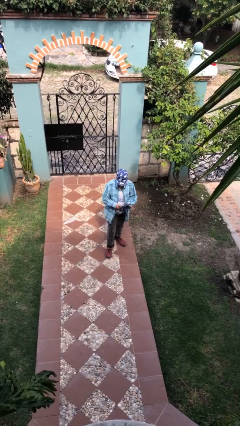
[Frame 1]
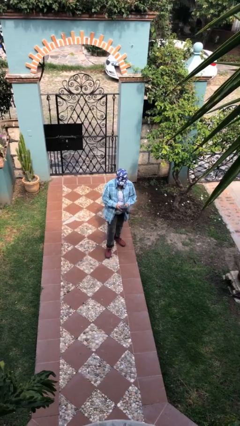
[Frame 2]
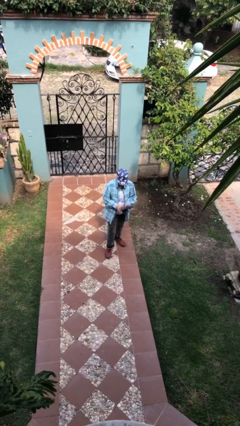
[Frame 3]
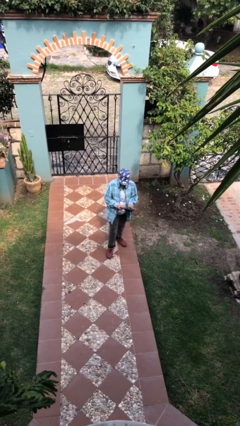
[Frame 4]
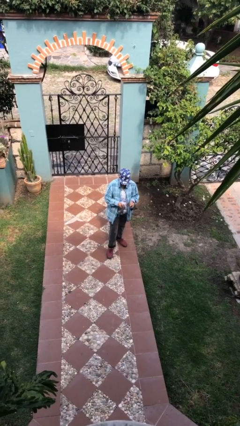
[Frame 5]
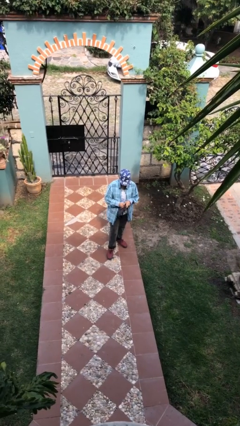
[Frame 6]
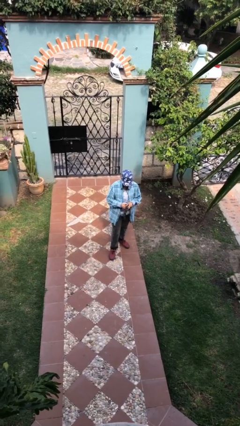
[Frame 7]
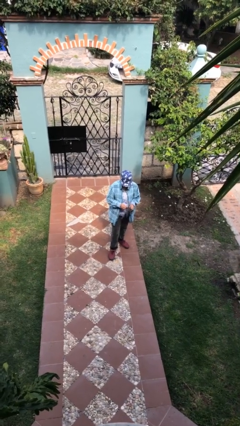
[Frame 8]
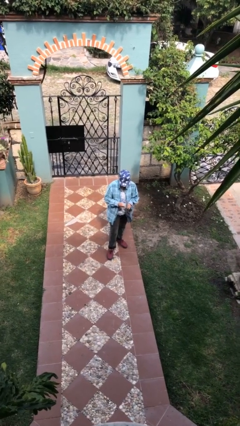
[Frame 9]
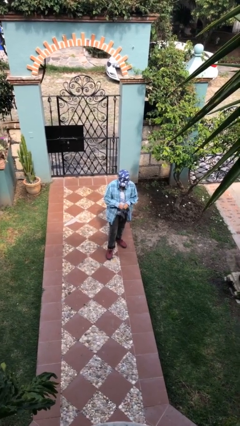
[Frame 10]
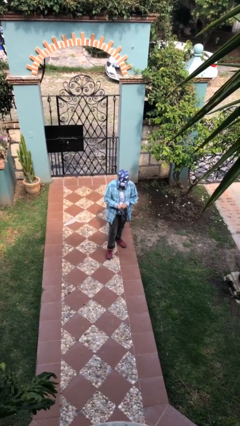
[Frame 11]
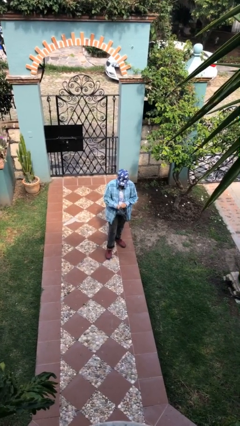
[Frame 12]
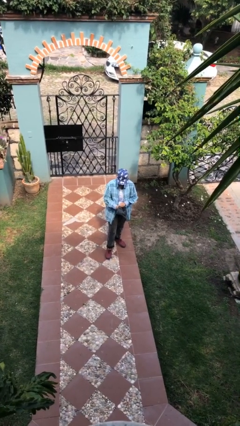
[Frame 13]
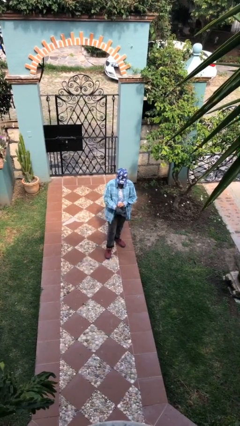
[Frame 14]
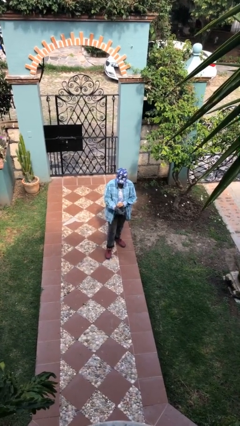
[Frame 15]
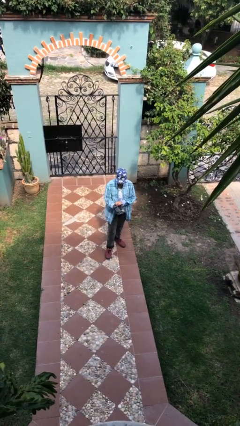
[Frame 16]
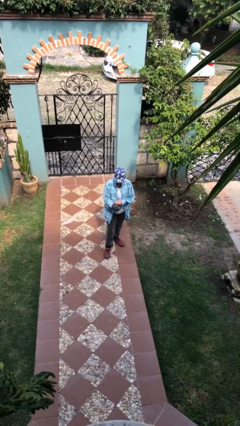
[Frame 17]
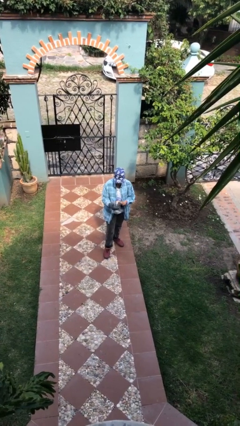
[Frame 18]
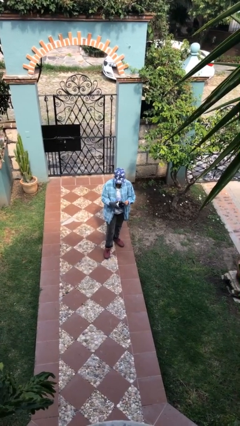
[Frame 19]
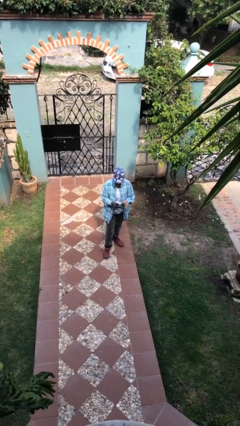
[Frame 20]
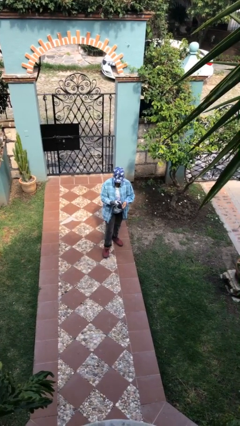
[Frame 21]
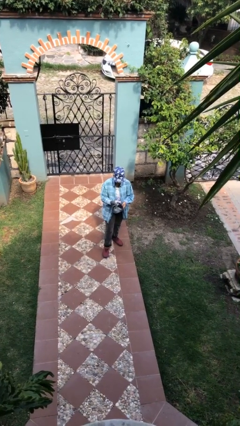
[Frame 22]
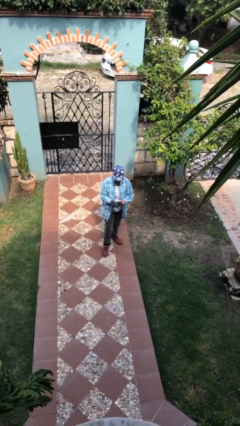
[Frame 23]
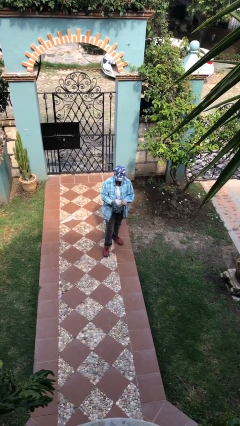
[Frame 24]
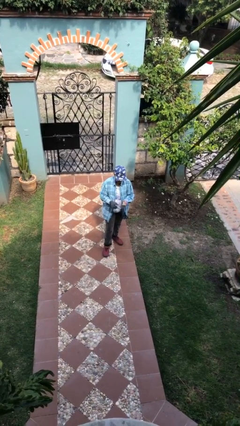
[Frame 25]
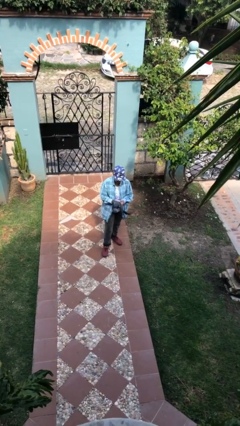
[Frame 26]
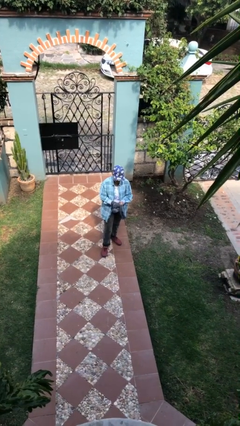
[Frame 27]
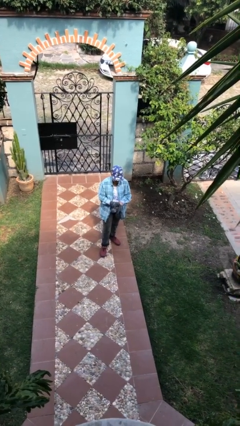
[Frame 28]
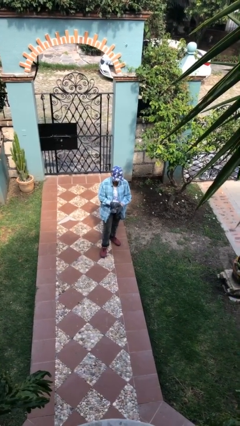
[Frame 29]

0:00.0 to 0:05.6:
person puts on gloves

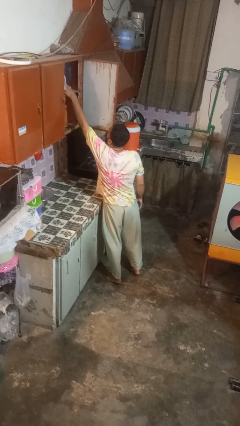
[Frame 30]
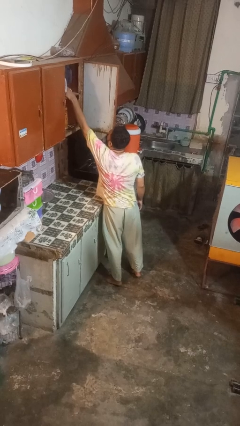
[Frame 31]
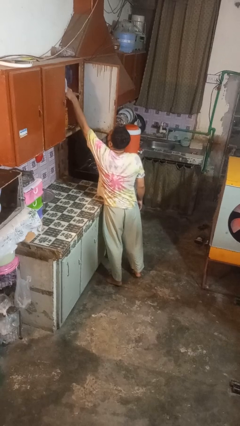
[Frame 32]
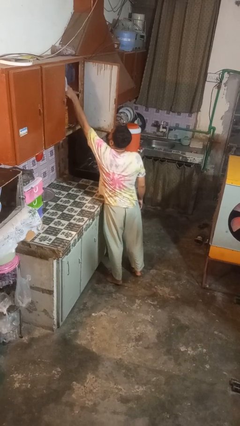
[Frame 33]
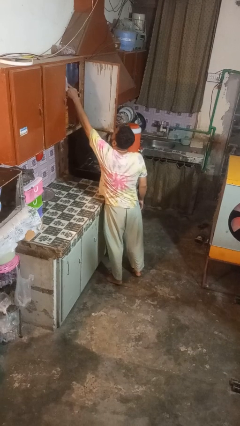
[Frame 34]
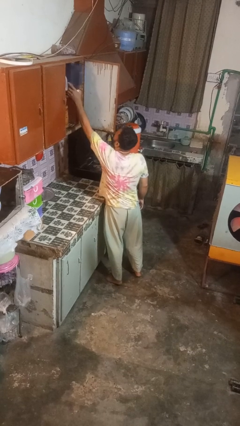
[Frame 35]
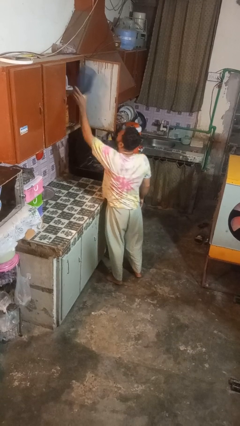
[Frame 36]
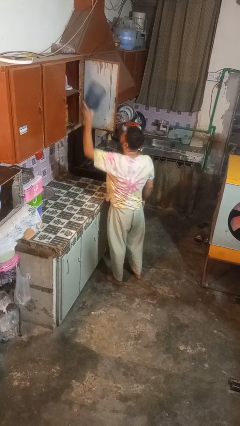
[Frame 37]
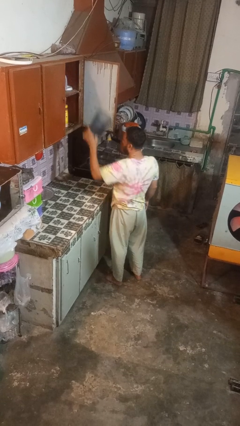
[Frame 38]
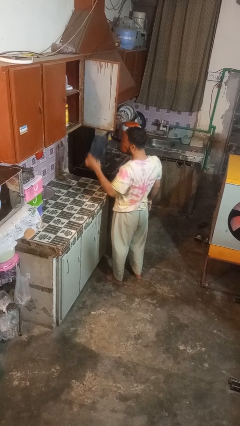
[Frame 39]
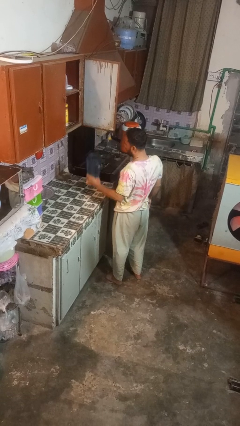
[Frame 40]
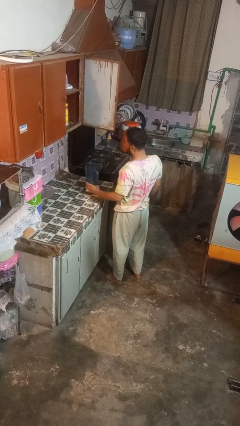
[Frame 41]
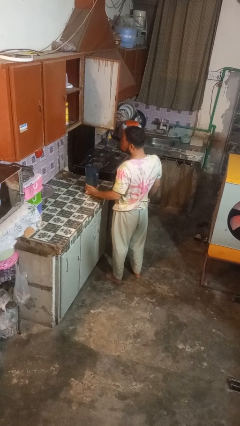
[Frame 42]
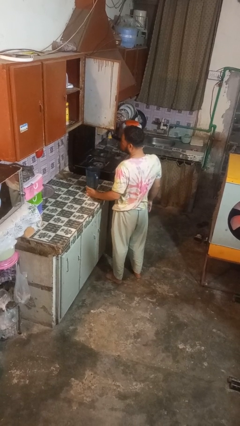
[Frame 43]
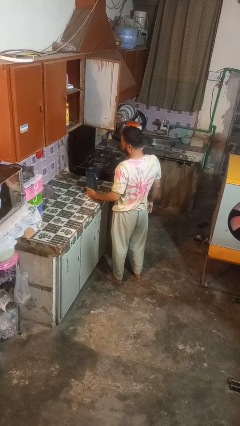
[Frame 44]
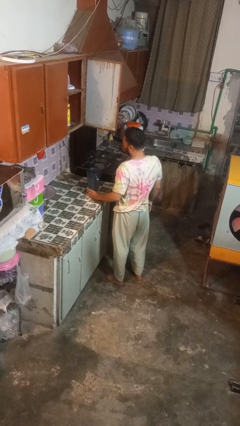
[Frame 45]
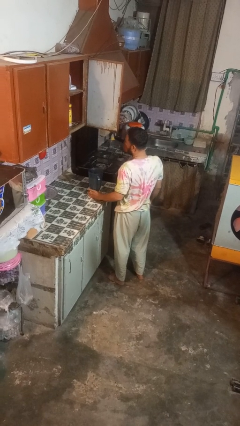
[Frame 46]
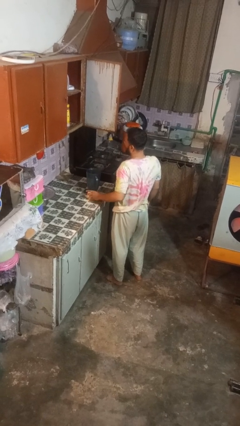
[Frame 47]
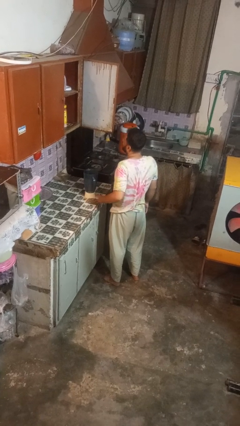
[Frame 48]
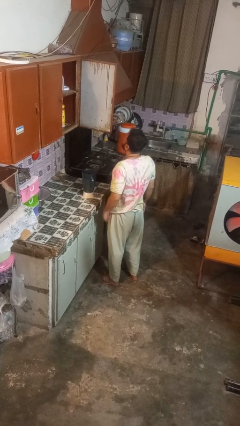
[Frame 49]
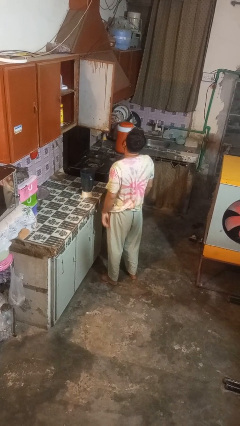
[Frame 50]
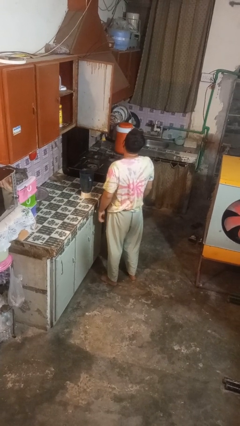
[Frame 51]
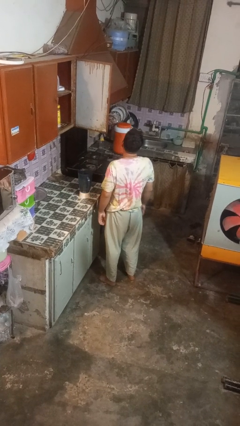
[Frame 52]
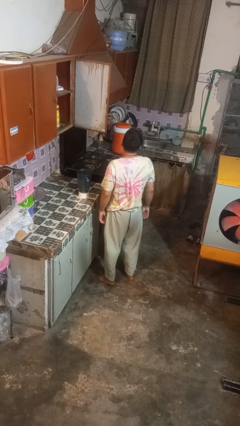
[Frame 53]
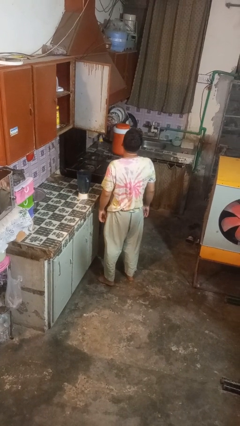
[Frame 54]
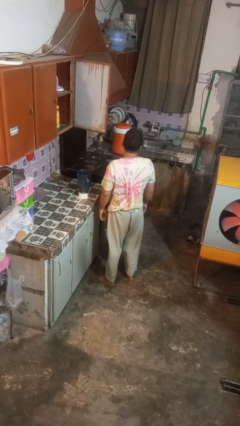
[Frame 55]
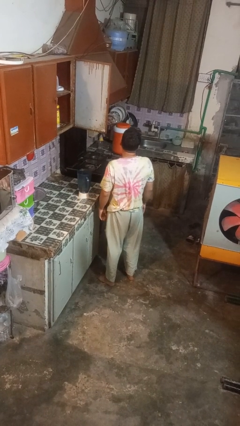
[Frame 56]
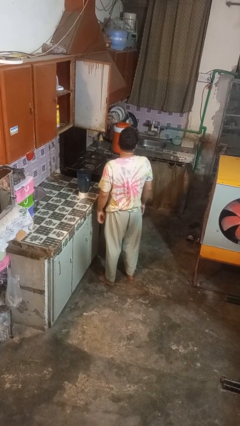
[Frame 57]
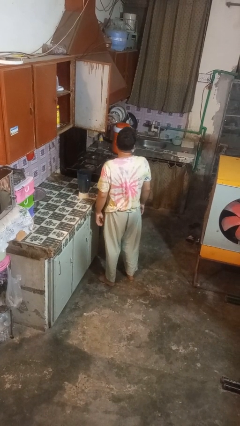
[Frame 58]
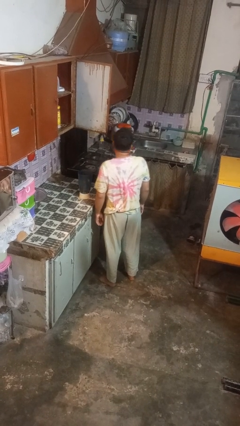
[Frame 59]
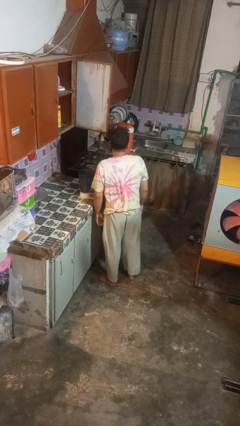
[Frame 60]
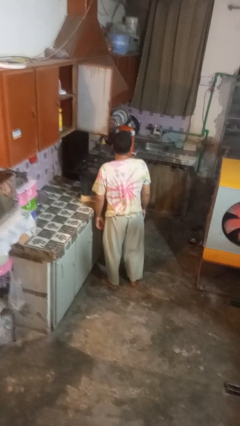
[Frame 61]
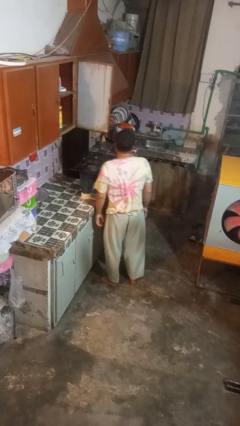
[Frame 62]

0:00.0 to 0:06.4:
person takes object from cabinet

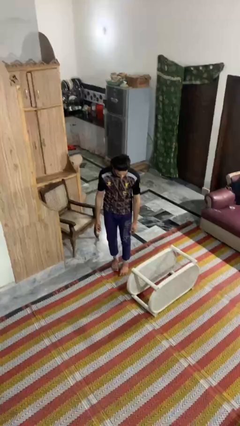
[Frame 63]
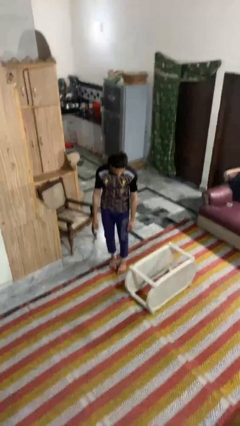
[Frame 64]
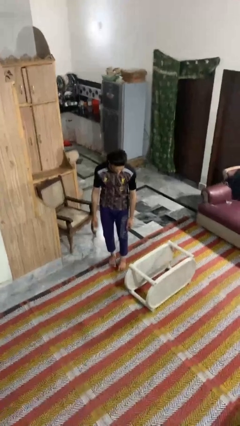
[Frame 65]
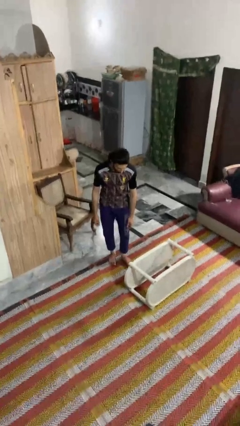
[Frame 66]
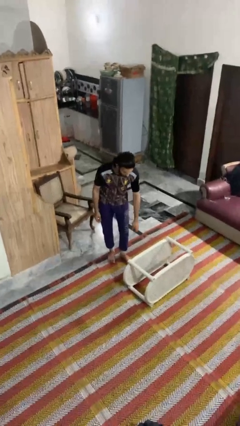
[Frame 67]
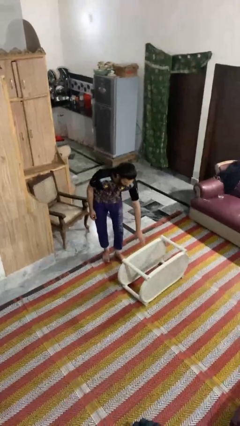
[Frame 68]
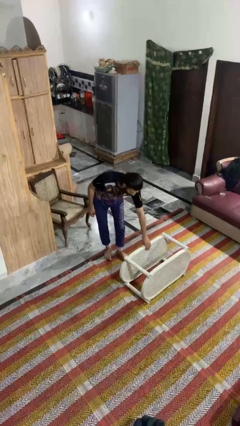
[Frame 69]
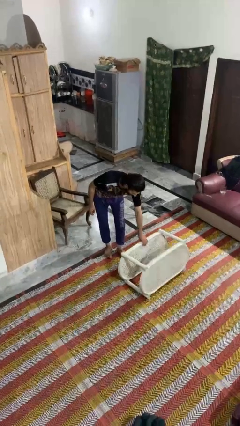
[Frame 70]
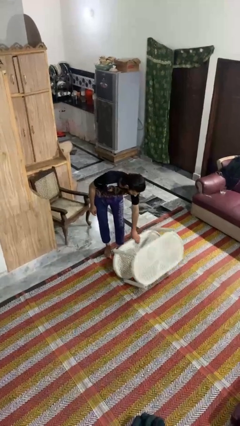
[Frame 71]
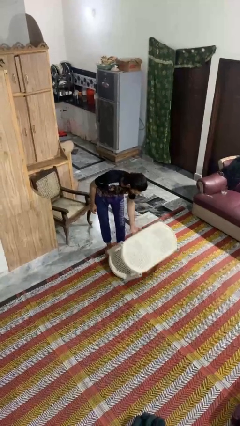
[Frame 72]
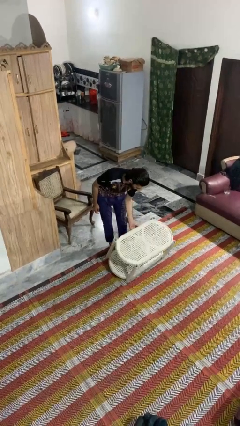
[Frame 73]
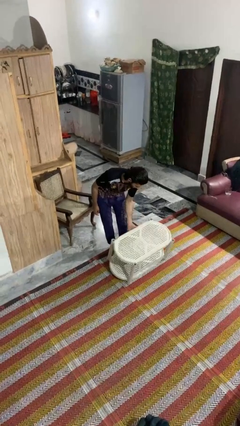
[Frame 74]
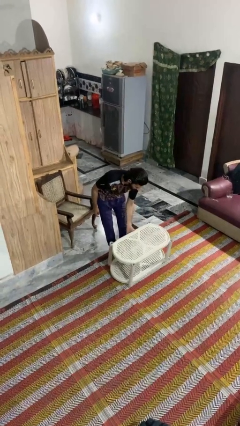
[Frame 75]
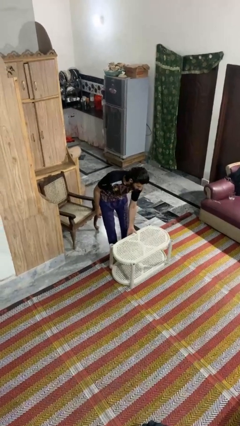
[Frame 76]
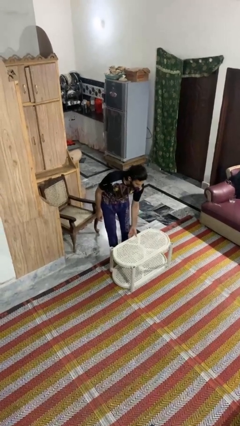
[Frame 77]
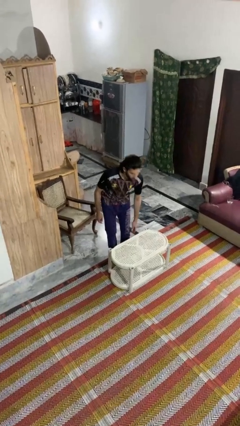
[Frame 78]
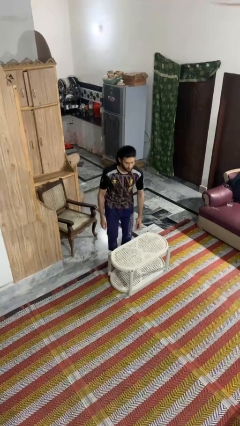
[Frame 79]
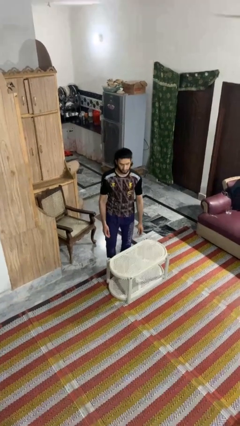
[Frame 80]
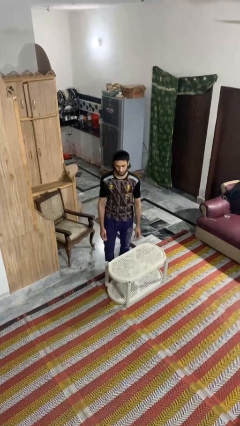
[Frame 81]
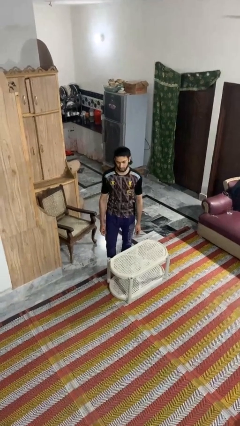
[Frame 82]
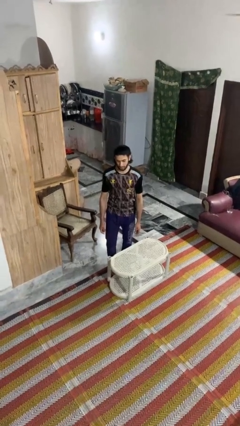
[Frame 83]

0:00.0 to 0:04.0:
person sets upright furniture

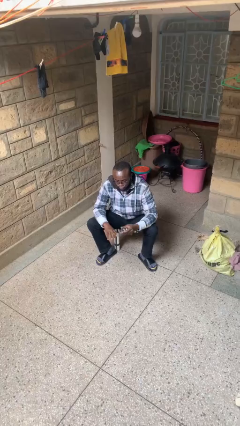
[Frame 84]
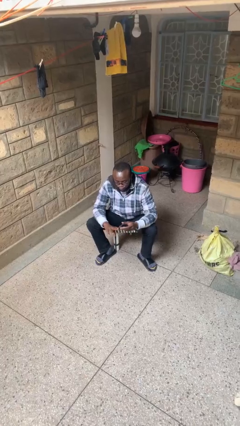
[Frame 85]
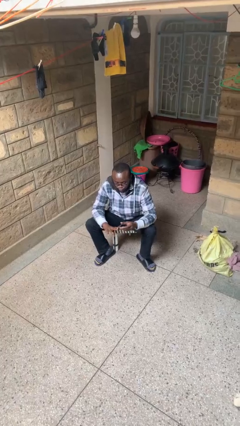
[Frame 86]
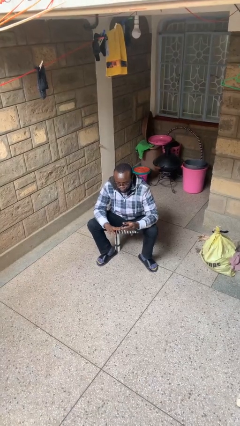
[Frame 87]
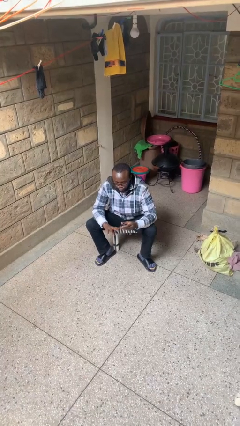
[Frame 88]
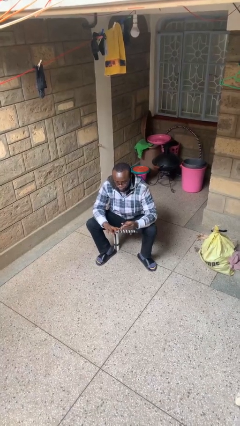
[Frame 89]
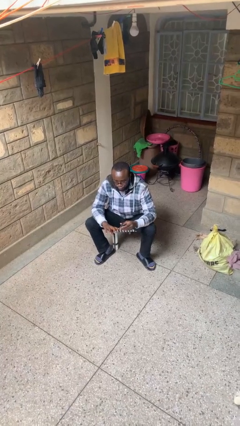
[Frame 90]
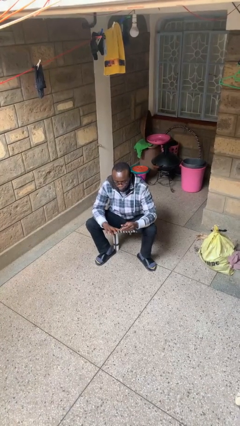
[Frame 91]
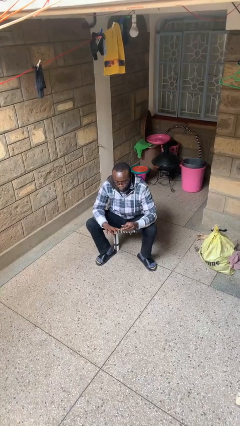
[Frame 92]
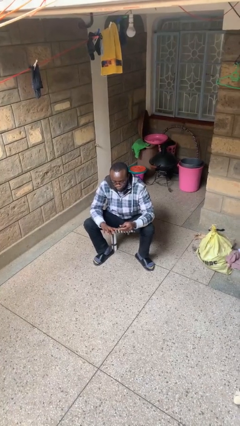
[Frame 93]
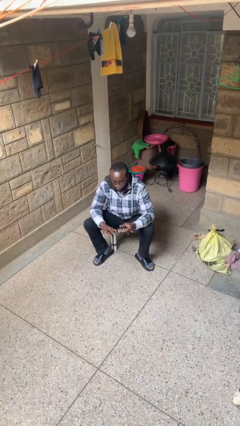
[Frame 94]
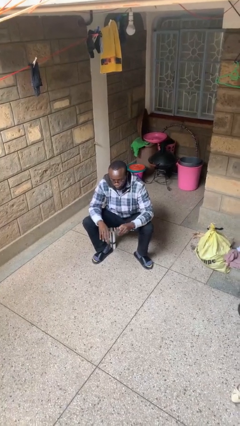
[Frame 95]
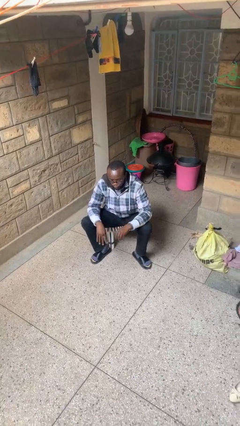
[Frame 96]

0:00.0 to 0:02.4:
person clips fingernails
